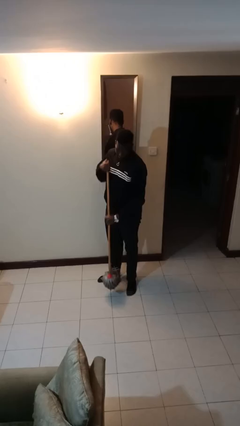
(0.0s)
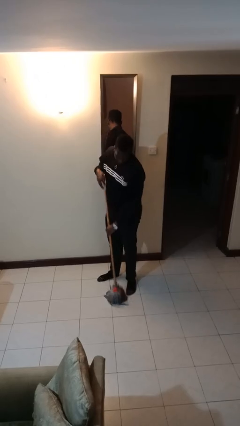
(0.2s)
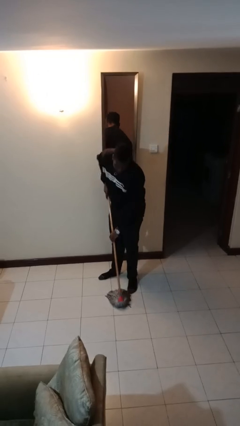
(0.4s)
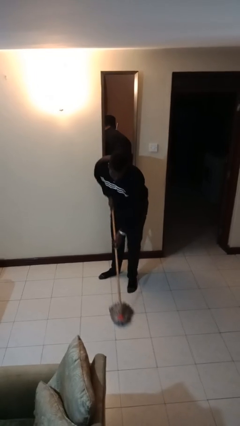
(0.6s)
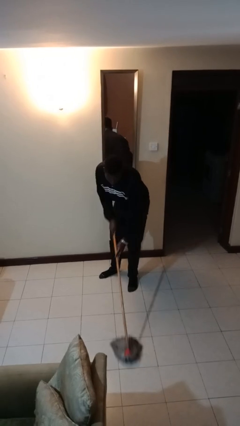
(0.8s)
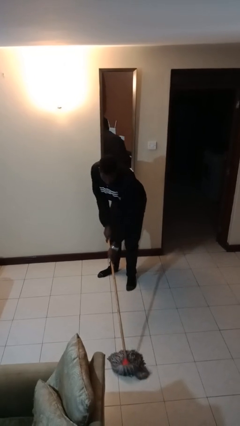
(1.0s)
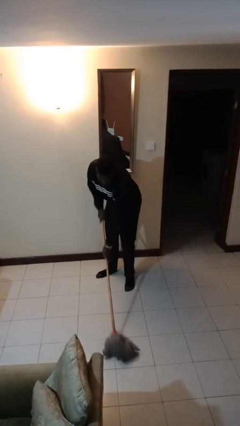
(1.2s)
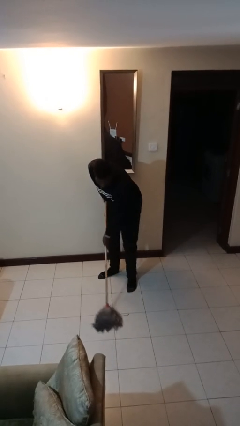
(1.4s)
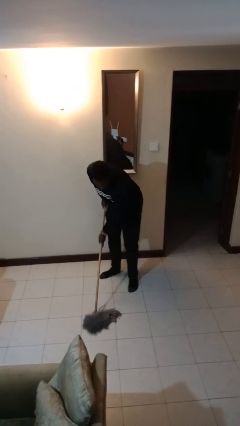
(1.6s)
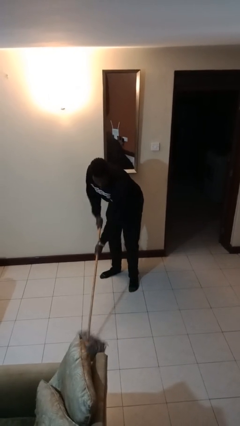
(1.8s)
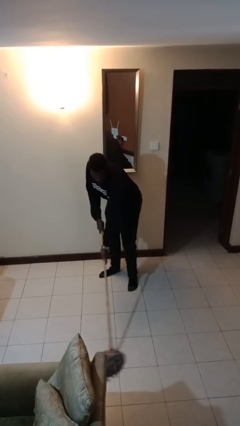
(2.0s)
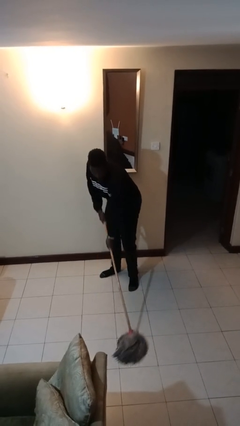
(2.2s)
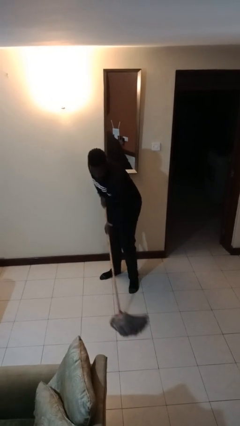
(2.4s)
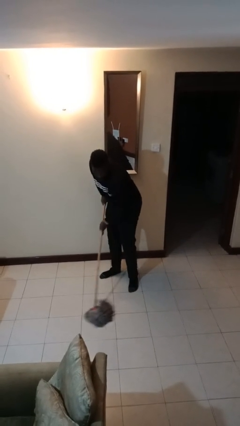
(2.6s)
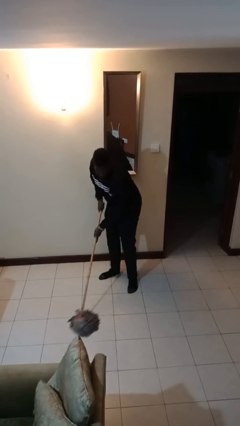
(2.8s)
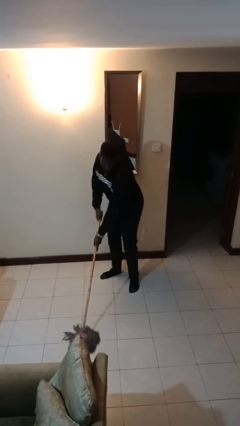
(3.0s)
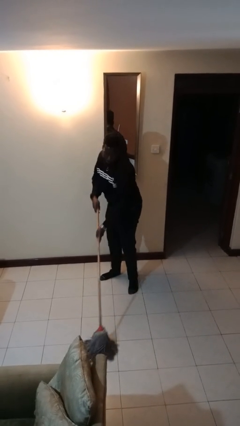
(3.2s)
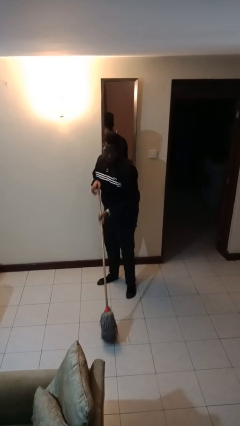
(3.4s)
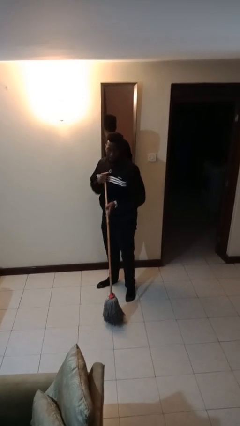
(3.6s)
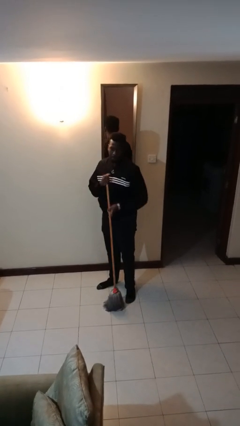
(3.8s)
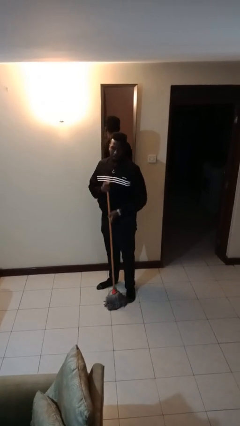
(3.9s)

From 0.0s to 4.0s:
person mops

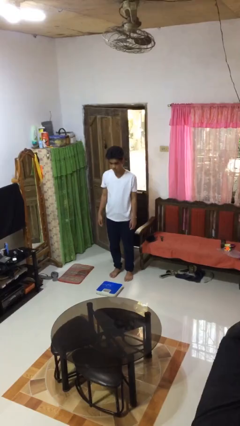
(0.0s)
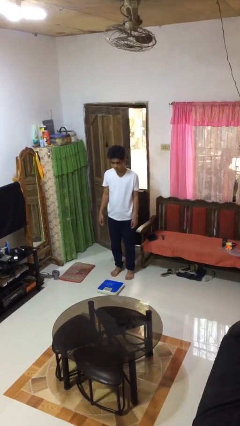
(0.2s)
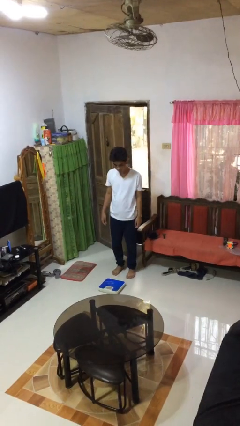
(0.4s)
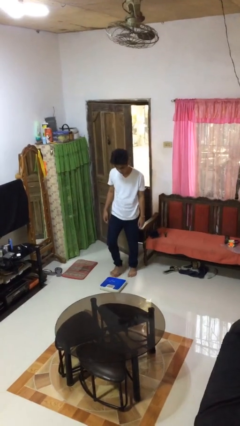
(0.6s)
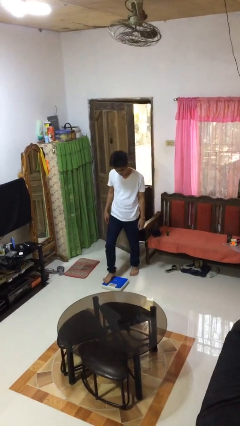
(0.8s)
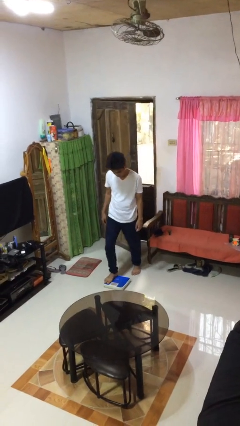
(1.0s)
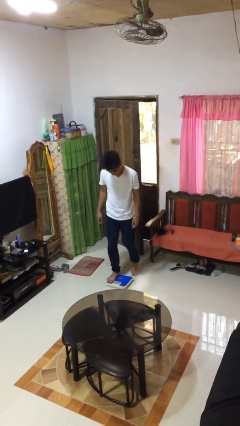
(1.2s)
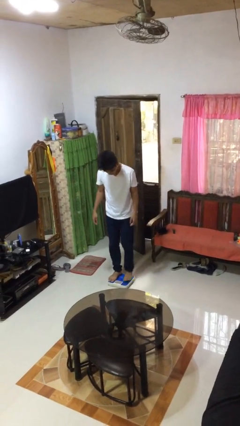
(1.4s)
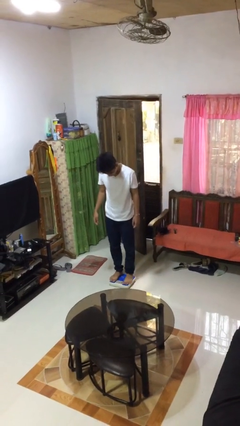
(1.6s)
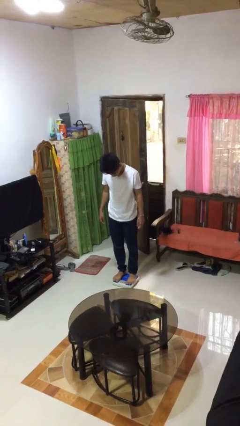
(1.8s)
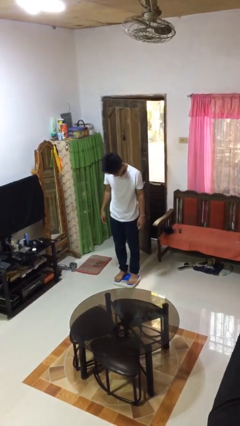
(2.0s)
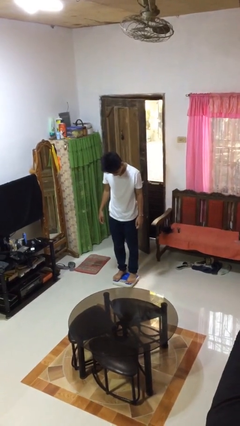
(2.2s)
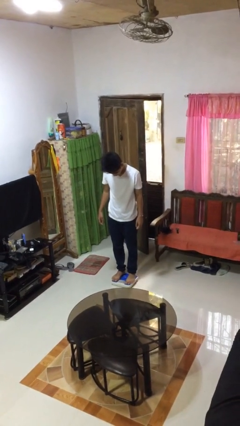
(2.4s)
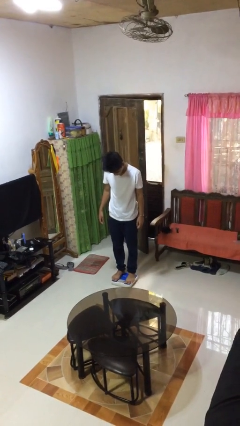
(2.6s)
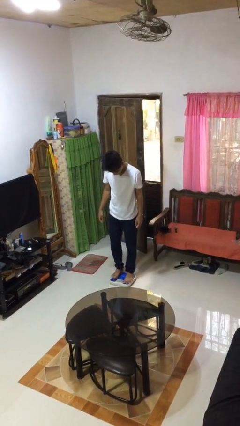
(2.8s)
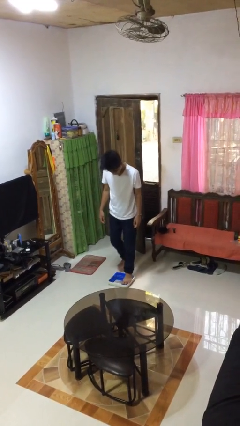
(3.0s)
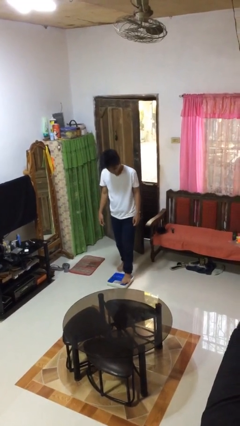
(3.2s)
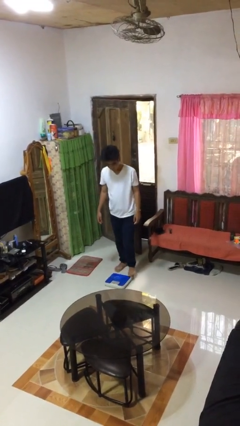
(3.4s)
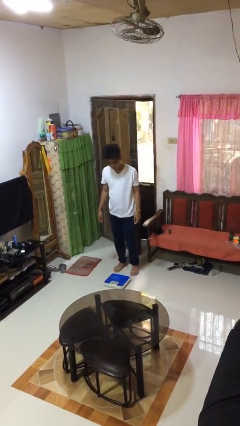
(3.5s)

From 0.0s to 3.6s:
person uses bodyweight scale

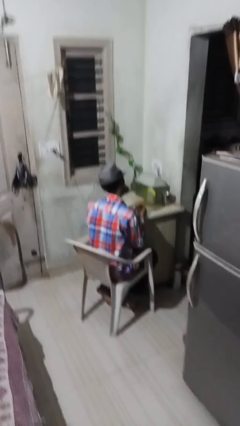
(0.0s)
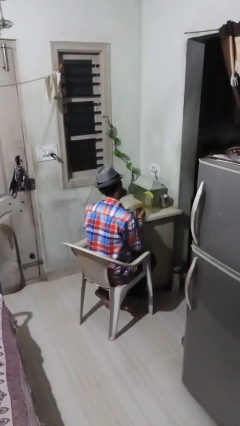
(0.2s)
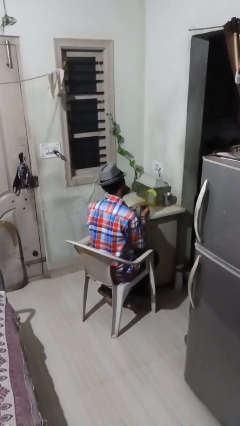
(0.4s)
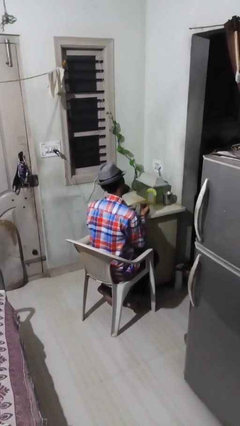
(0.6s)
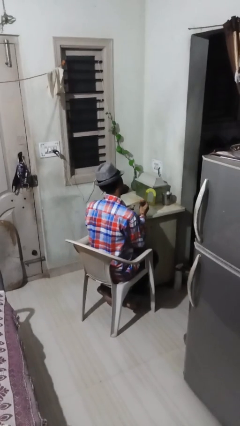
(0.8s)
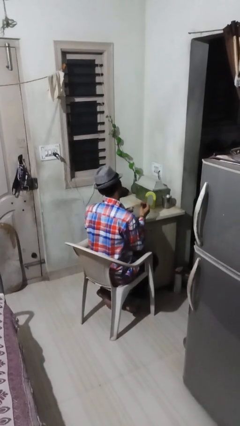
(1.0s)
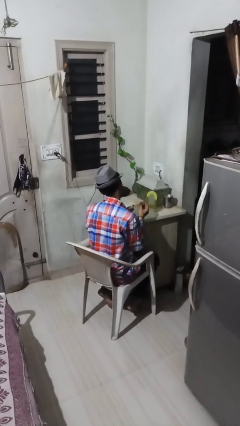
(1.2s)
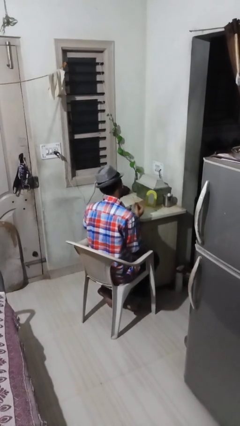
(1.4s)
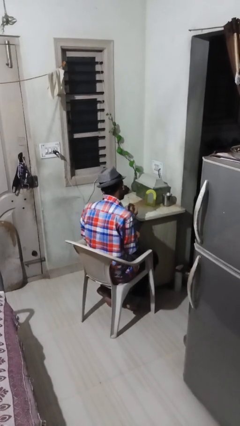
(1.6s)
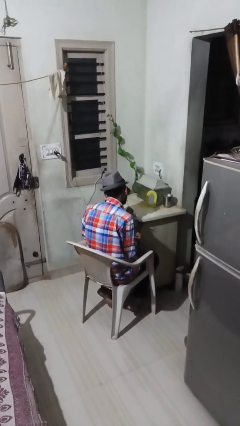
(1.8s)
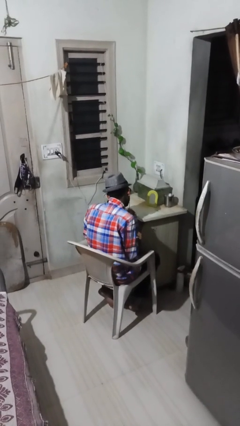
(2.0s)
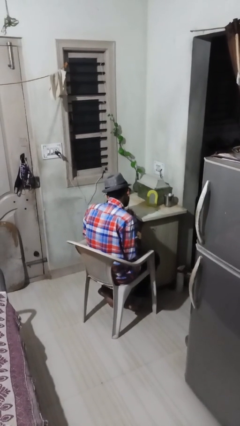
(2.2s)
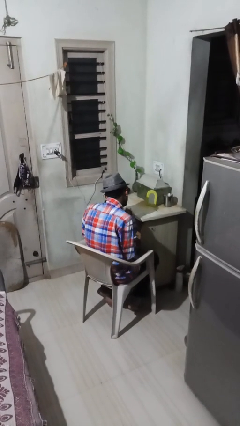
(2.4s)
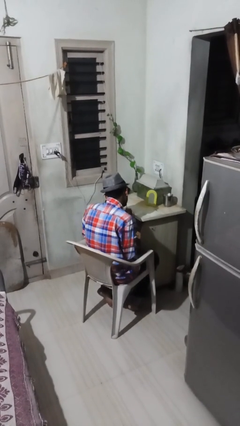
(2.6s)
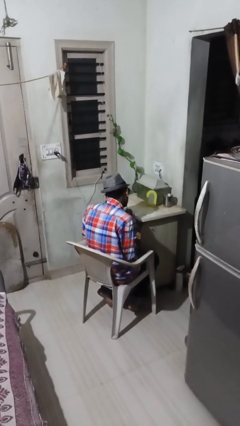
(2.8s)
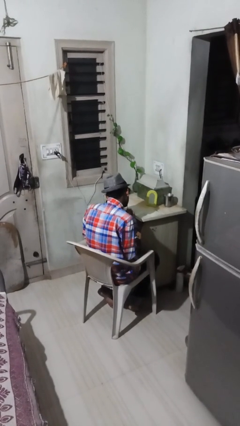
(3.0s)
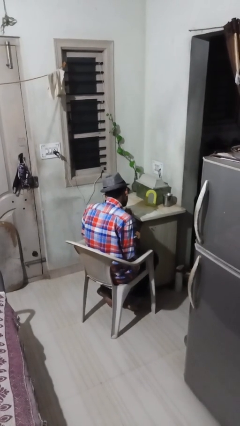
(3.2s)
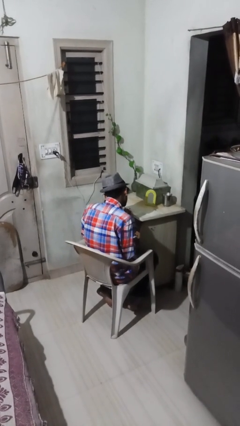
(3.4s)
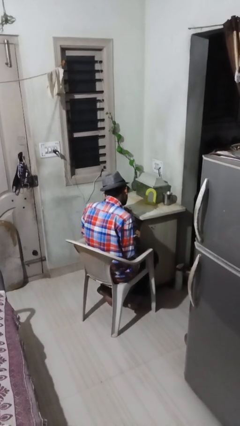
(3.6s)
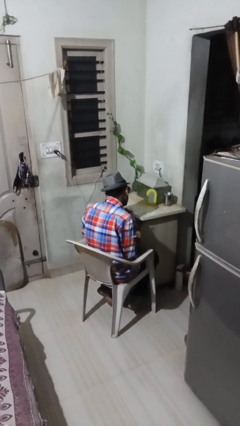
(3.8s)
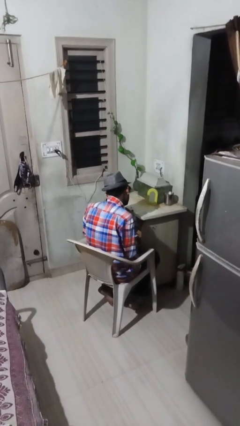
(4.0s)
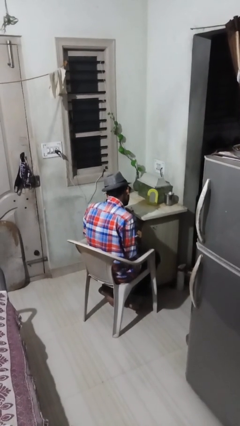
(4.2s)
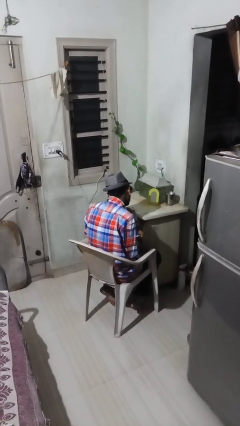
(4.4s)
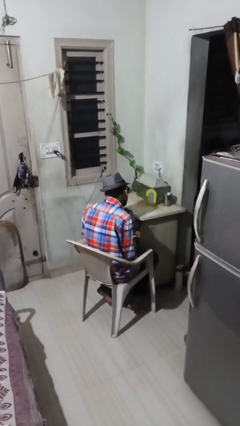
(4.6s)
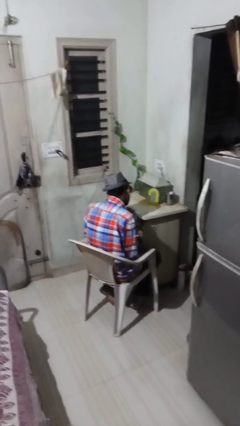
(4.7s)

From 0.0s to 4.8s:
person applies lip makeup

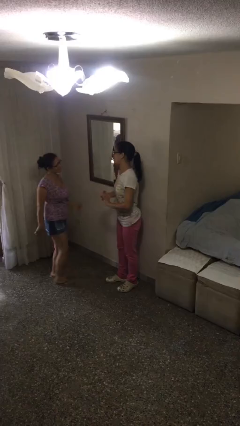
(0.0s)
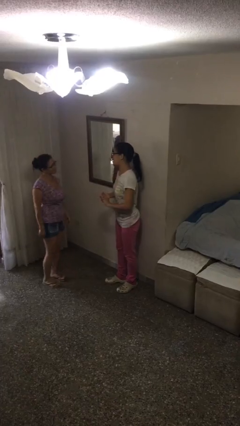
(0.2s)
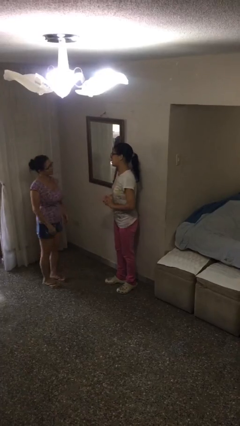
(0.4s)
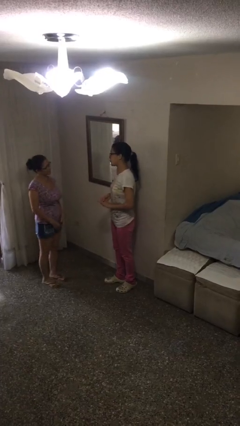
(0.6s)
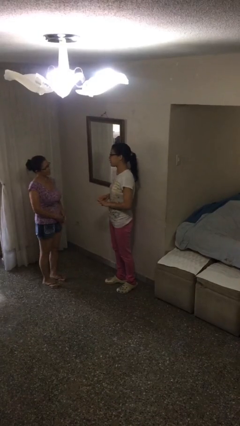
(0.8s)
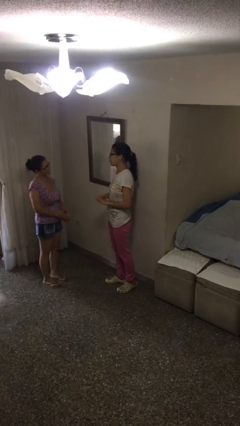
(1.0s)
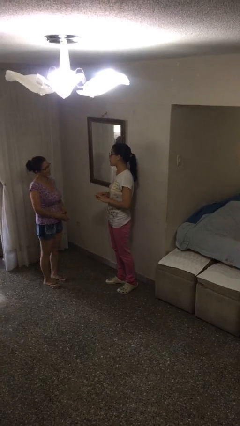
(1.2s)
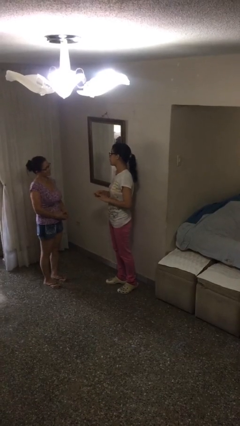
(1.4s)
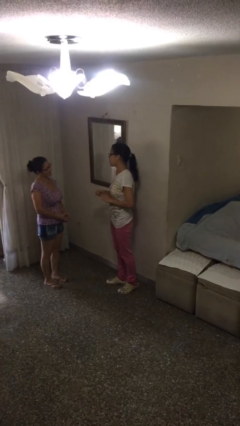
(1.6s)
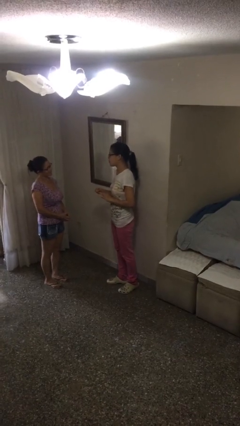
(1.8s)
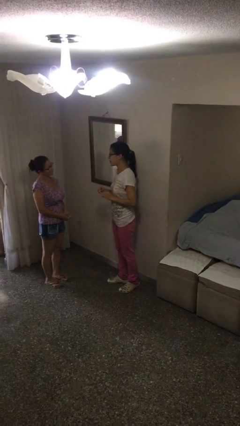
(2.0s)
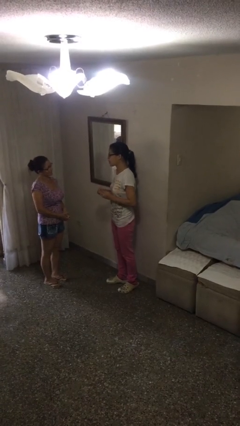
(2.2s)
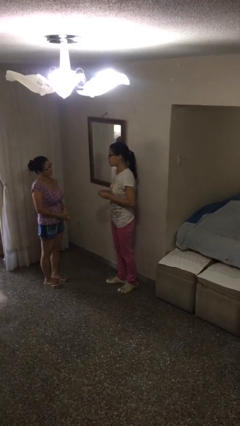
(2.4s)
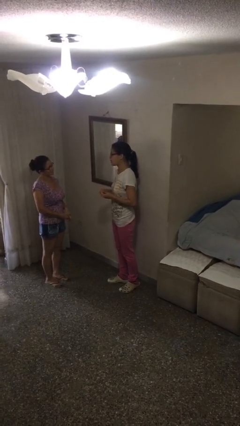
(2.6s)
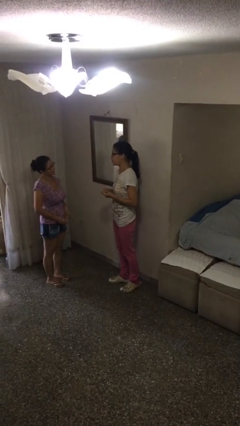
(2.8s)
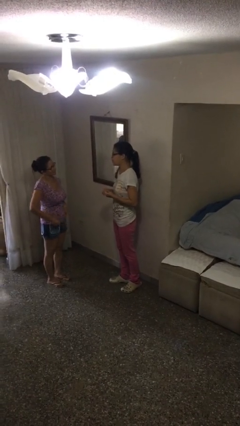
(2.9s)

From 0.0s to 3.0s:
person talks to person

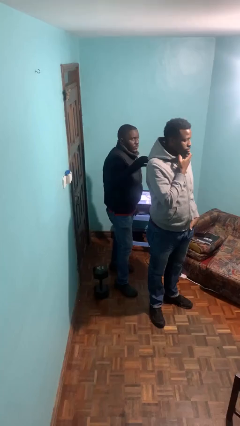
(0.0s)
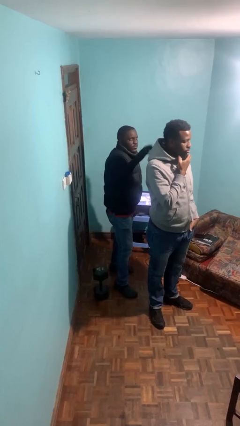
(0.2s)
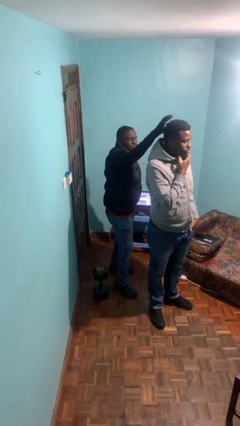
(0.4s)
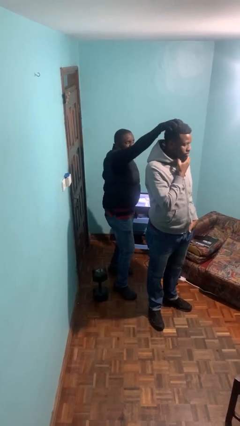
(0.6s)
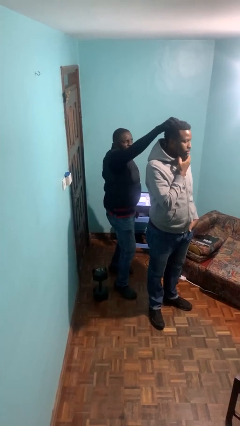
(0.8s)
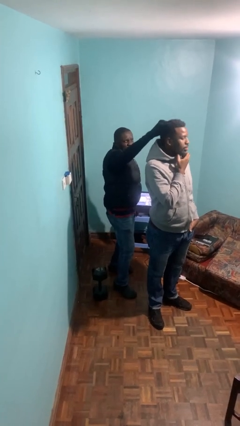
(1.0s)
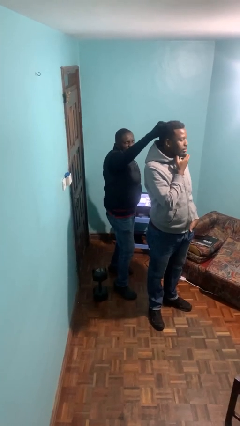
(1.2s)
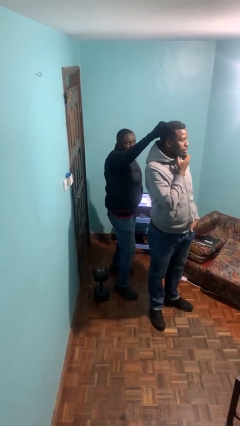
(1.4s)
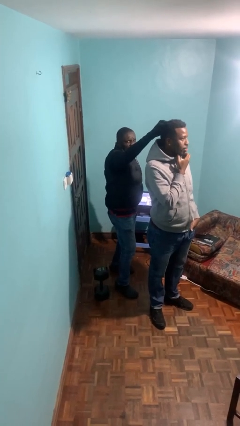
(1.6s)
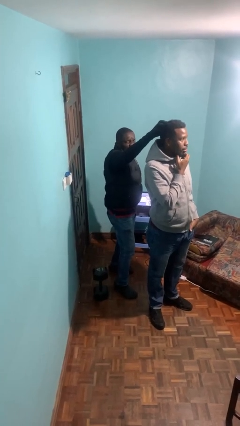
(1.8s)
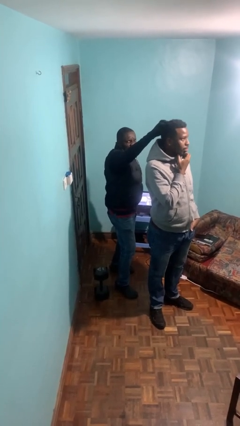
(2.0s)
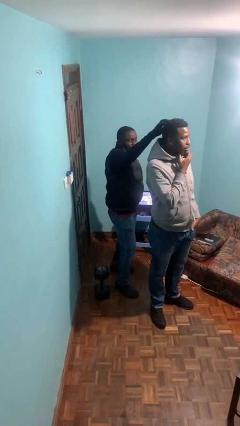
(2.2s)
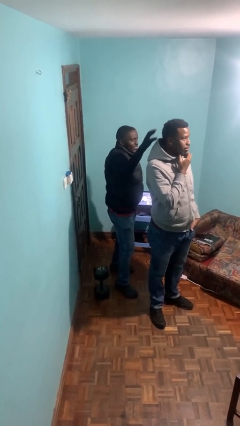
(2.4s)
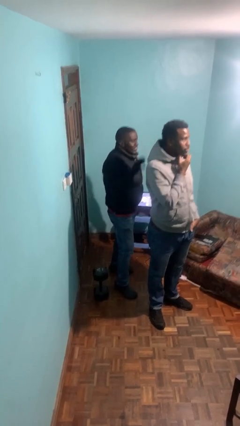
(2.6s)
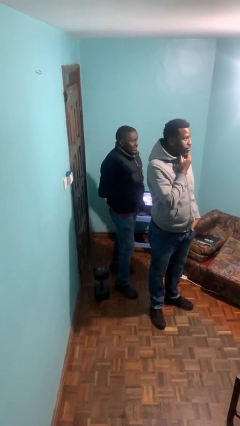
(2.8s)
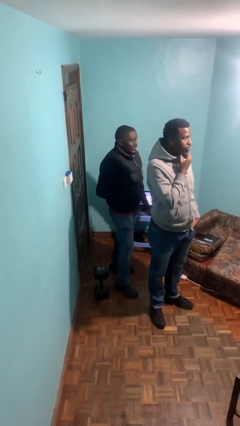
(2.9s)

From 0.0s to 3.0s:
person grabs person by hair
